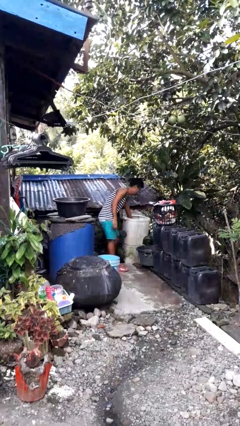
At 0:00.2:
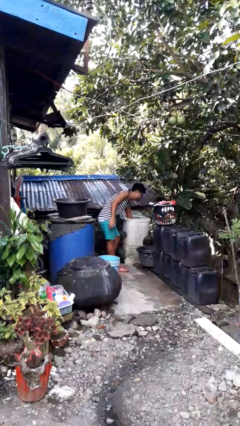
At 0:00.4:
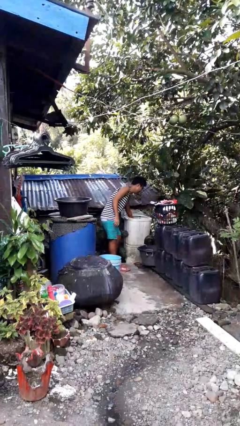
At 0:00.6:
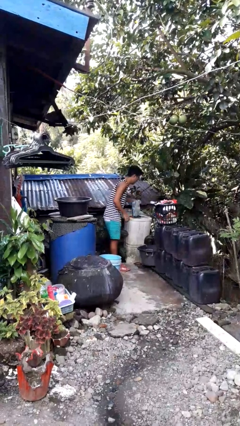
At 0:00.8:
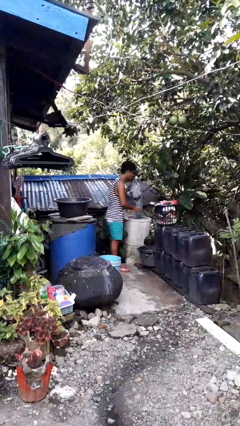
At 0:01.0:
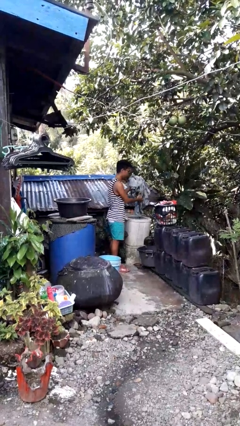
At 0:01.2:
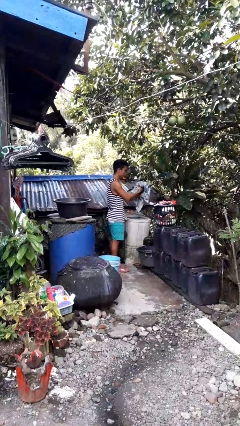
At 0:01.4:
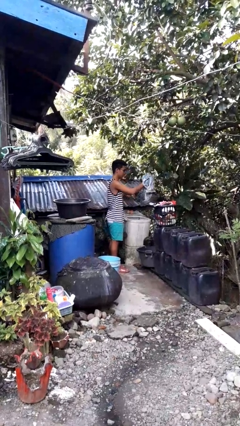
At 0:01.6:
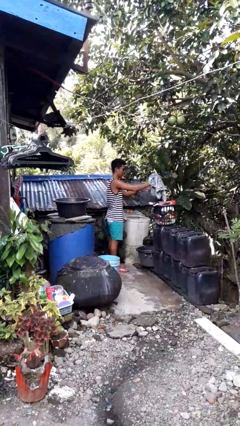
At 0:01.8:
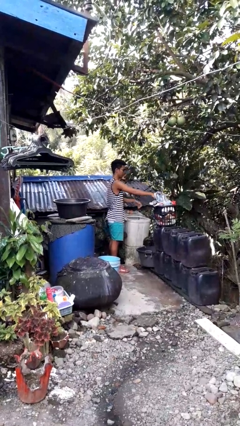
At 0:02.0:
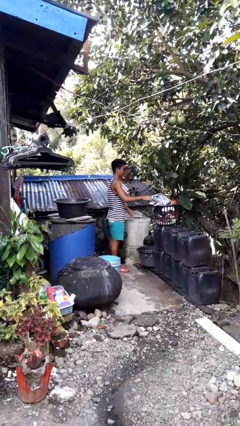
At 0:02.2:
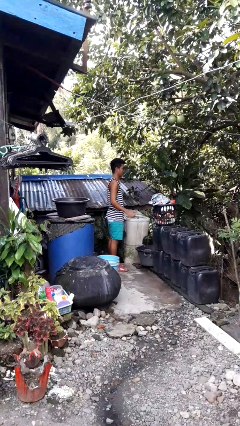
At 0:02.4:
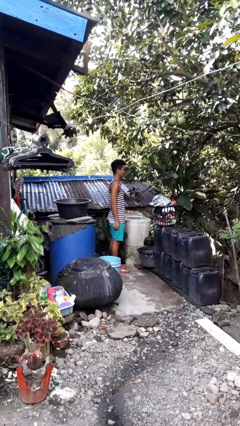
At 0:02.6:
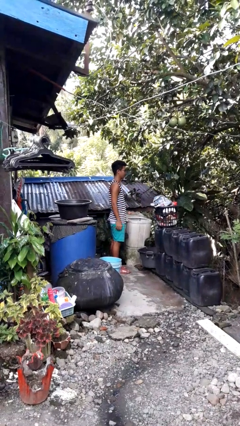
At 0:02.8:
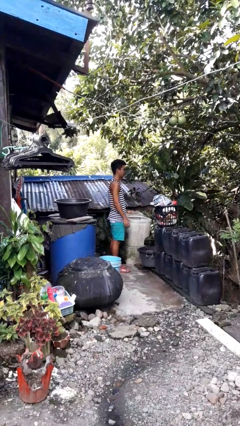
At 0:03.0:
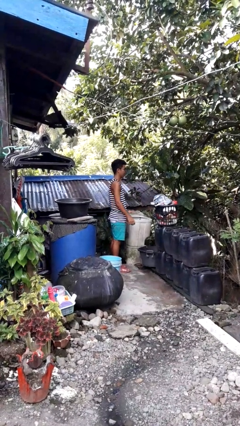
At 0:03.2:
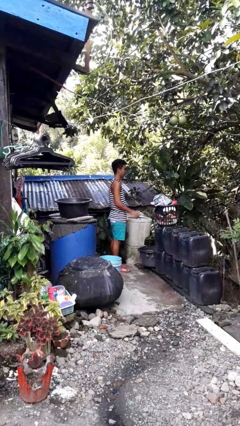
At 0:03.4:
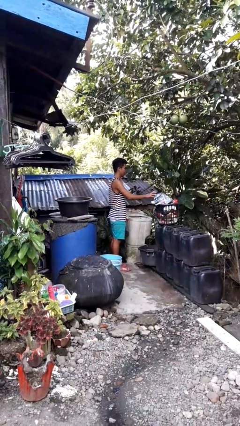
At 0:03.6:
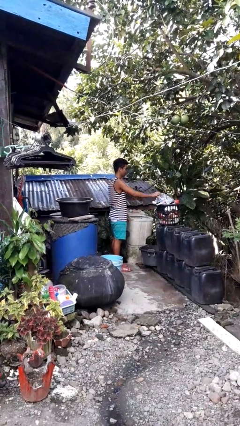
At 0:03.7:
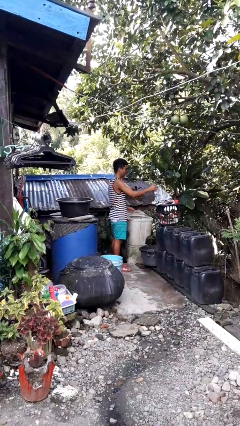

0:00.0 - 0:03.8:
person unloads clotheswasher

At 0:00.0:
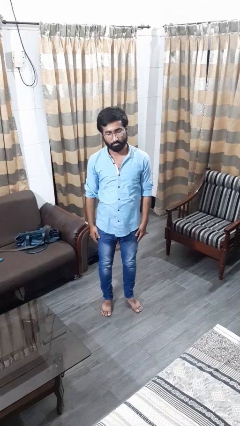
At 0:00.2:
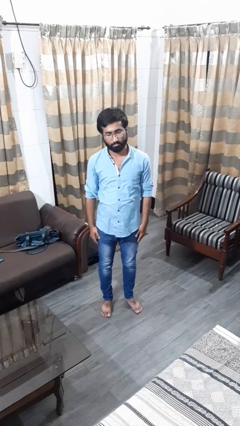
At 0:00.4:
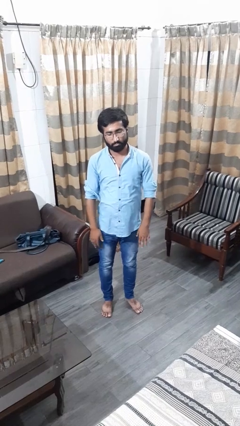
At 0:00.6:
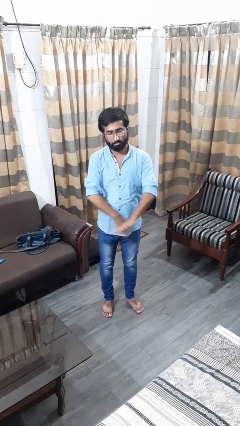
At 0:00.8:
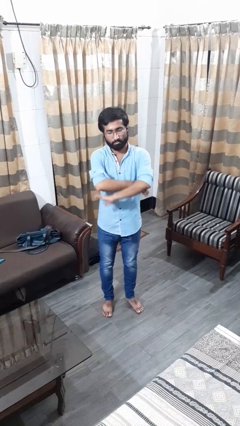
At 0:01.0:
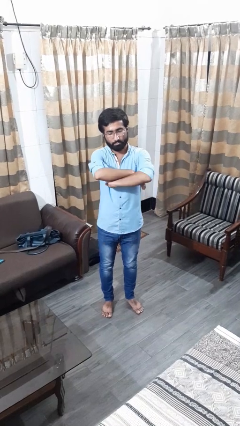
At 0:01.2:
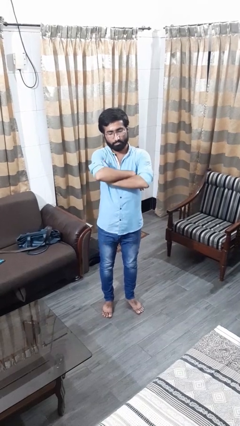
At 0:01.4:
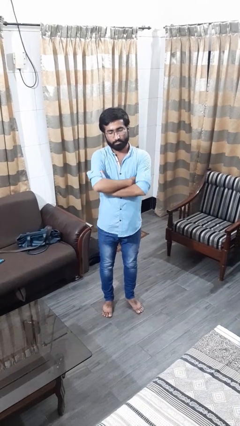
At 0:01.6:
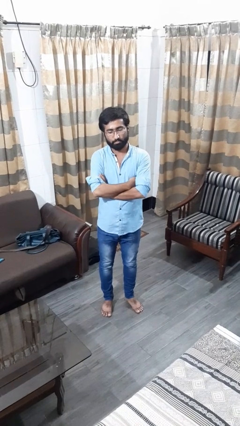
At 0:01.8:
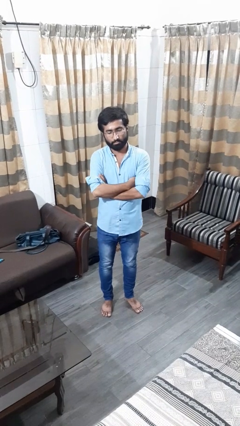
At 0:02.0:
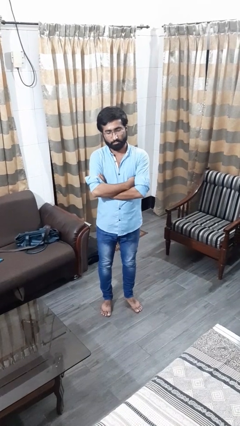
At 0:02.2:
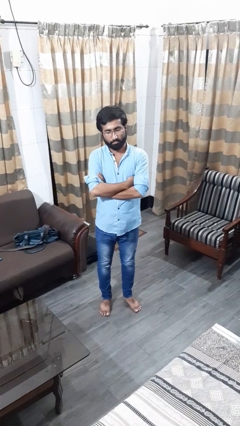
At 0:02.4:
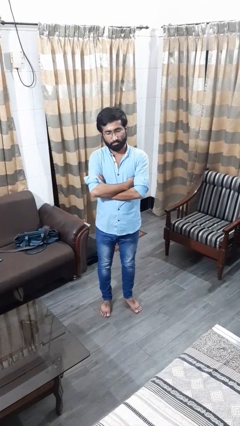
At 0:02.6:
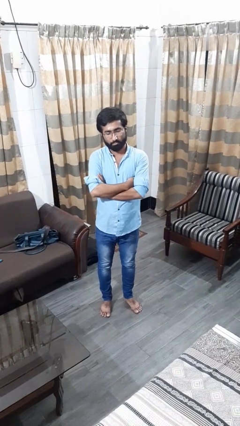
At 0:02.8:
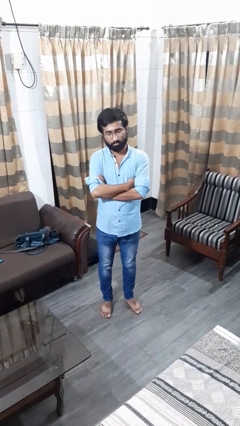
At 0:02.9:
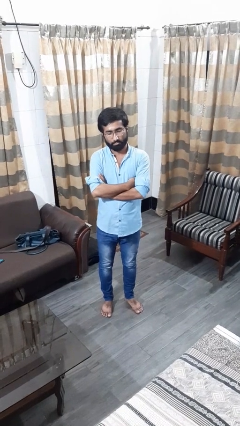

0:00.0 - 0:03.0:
person crosses arms

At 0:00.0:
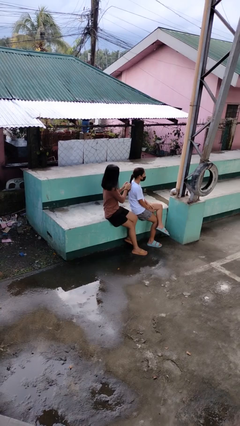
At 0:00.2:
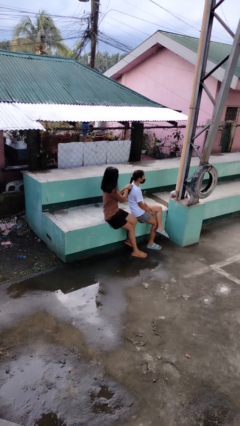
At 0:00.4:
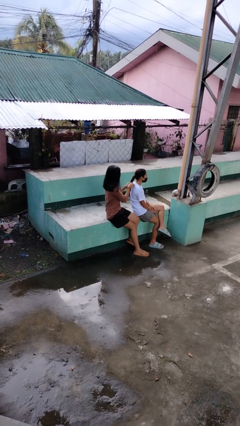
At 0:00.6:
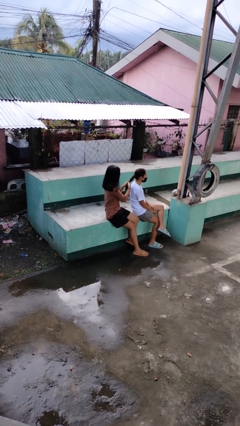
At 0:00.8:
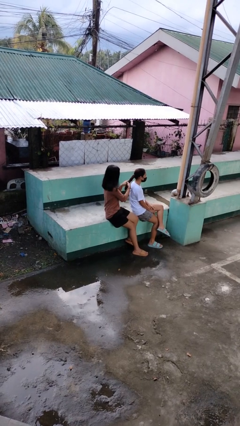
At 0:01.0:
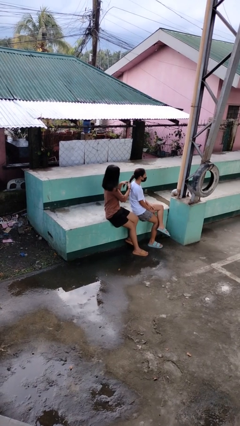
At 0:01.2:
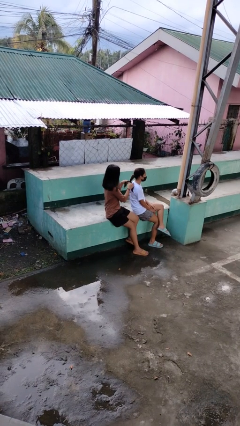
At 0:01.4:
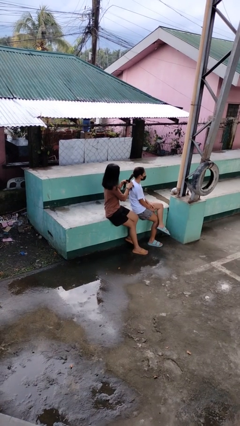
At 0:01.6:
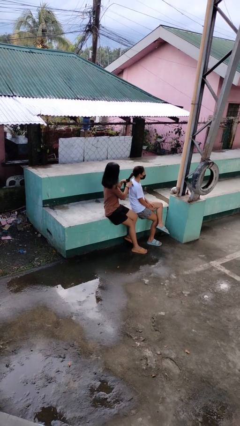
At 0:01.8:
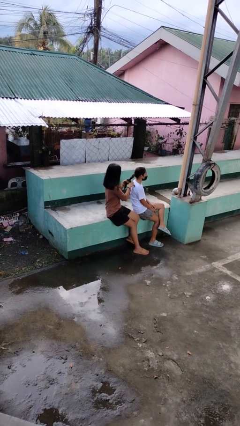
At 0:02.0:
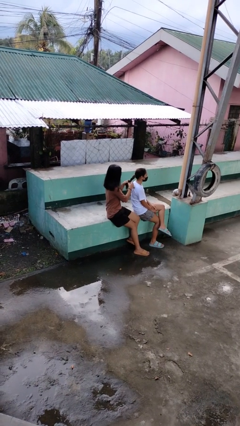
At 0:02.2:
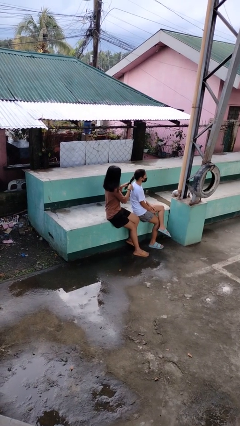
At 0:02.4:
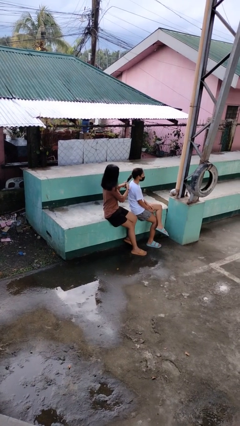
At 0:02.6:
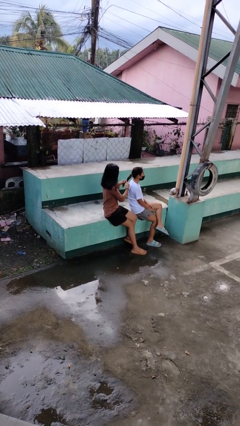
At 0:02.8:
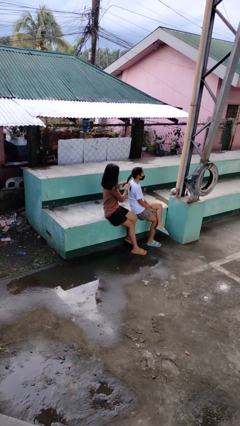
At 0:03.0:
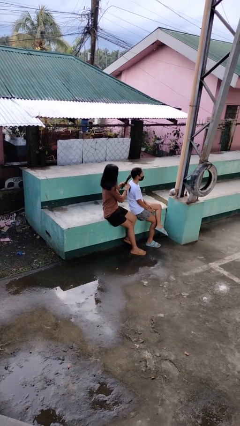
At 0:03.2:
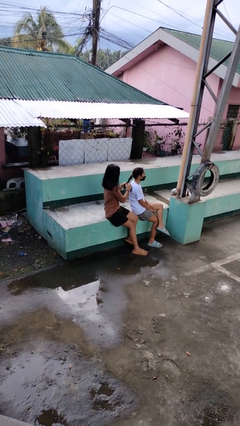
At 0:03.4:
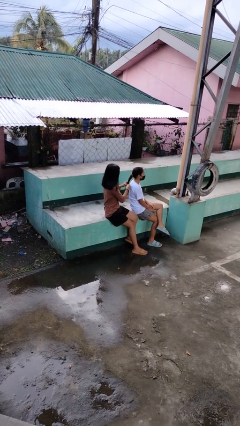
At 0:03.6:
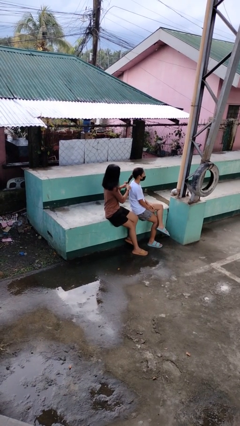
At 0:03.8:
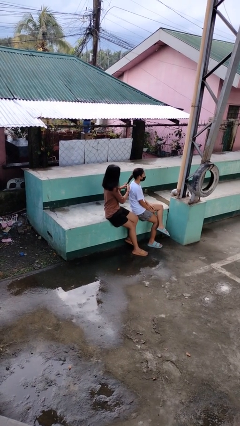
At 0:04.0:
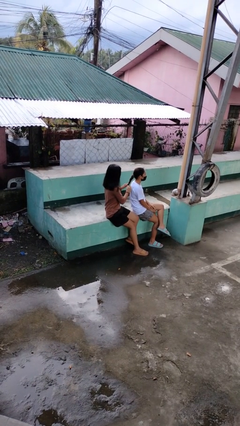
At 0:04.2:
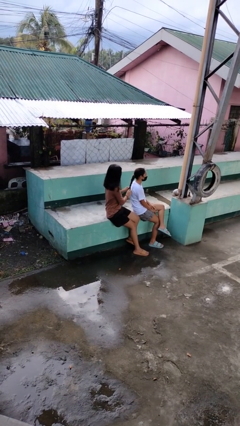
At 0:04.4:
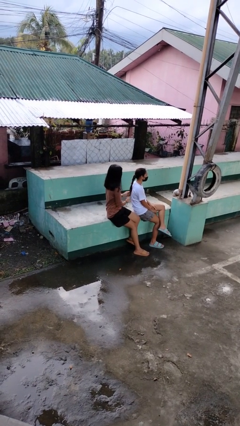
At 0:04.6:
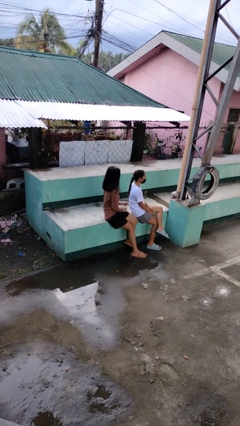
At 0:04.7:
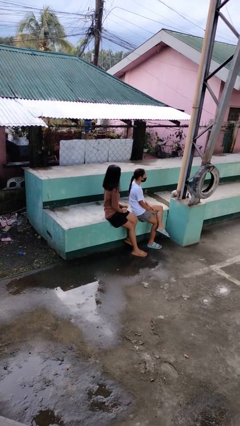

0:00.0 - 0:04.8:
person braids hair of person

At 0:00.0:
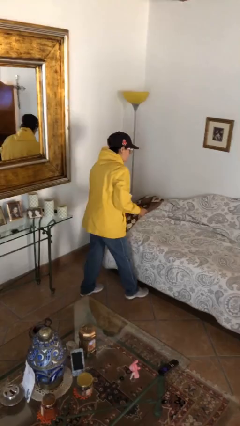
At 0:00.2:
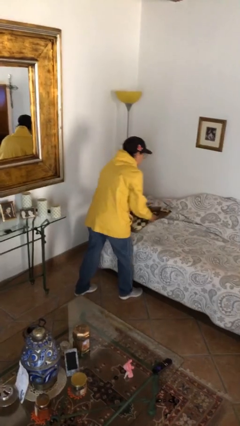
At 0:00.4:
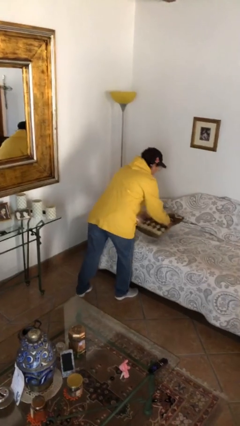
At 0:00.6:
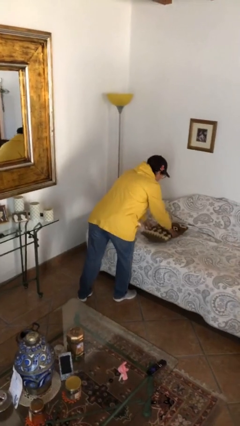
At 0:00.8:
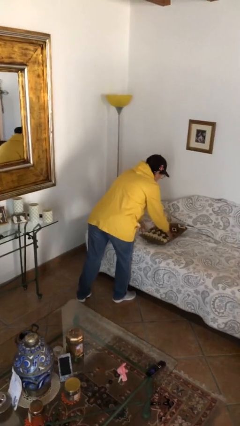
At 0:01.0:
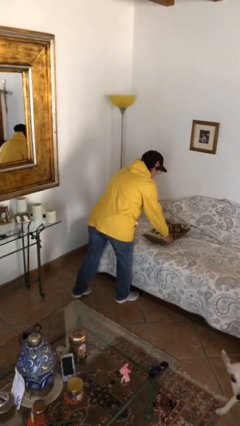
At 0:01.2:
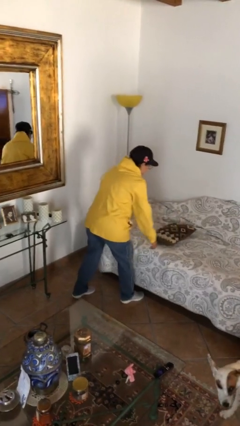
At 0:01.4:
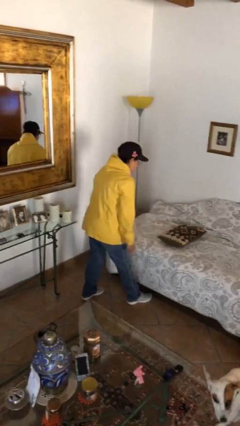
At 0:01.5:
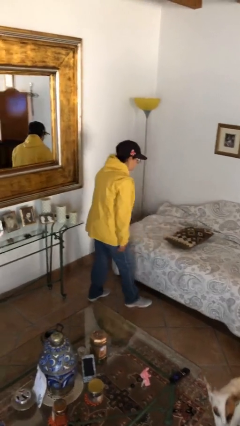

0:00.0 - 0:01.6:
person puts down object on bed

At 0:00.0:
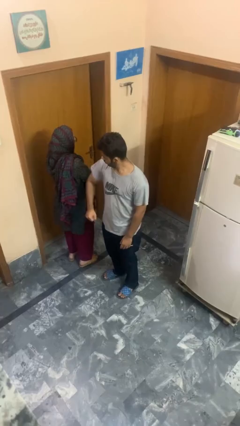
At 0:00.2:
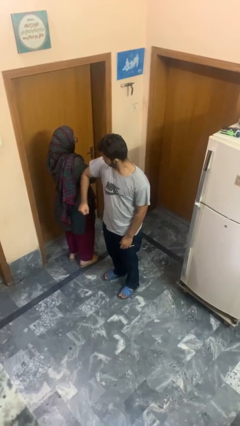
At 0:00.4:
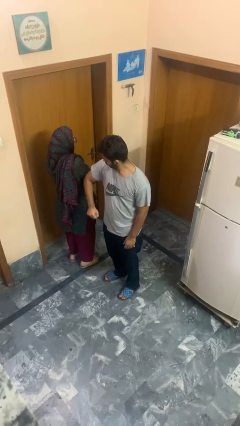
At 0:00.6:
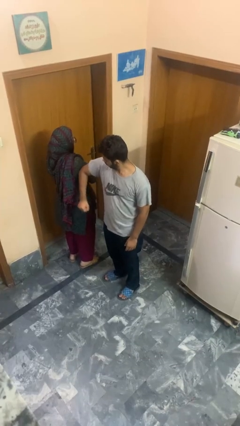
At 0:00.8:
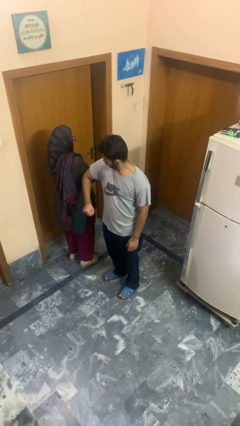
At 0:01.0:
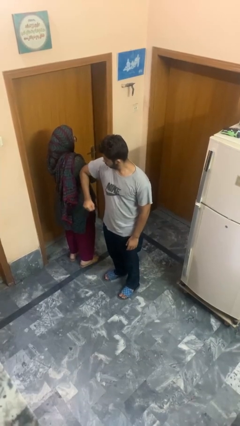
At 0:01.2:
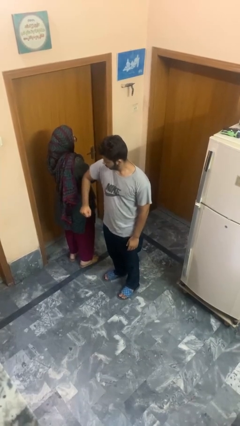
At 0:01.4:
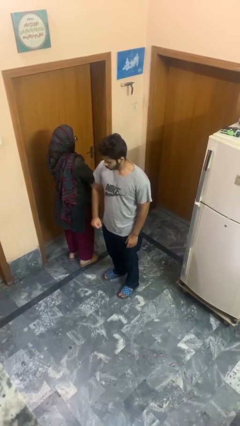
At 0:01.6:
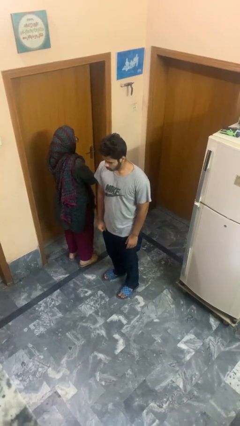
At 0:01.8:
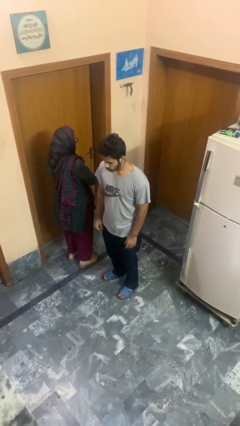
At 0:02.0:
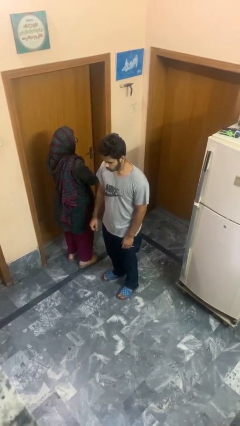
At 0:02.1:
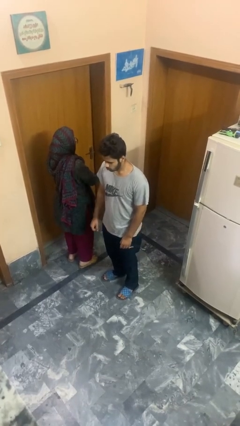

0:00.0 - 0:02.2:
person nudges person with elbow

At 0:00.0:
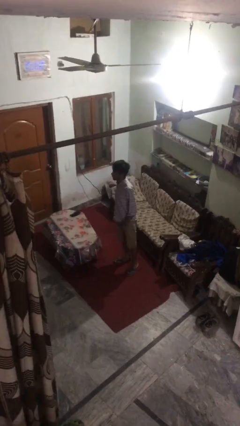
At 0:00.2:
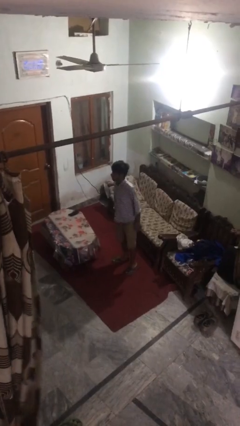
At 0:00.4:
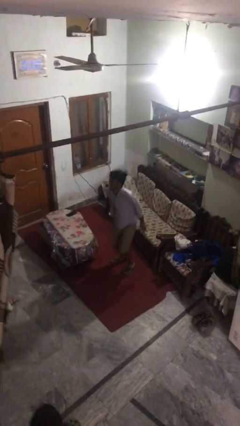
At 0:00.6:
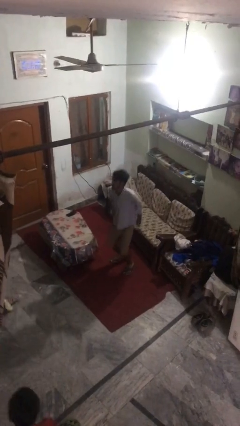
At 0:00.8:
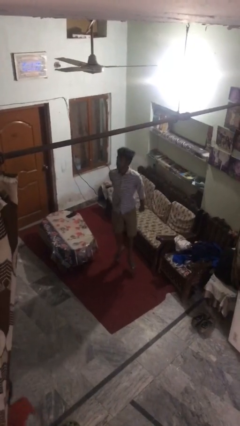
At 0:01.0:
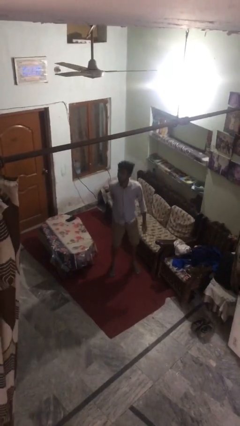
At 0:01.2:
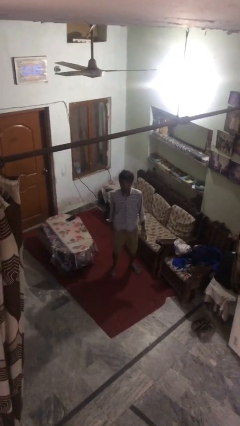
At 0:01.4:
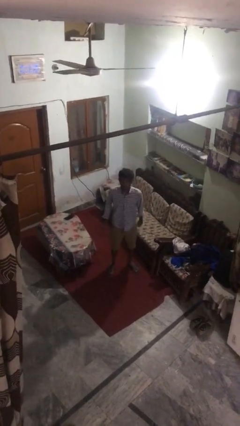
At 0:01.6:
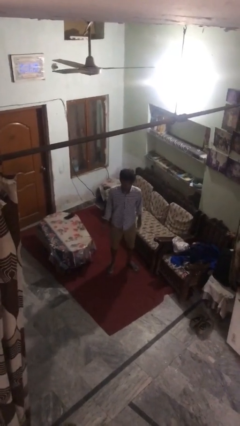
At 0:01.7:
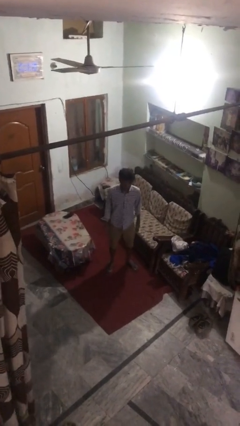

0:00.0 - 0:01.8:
person jumps
